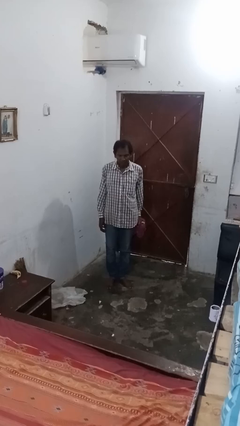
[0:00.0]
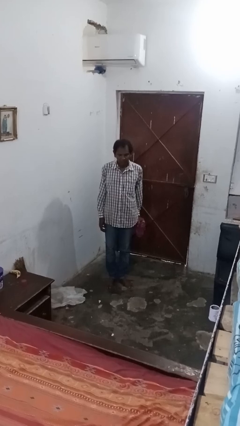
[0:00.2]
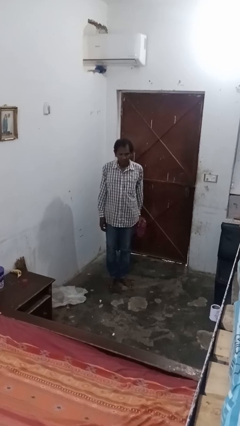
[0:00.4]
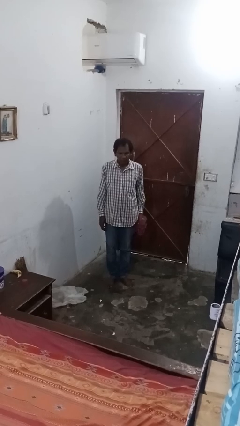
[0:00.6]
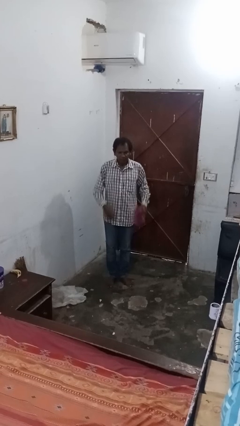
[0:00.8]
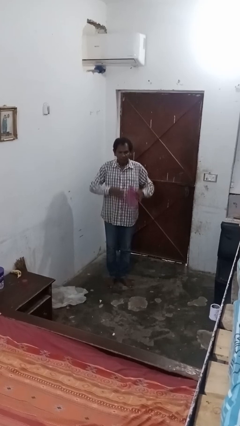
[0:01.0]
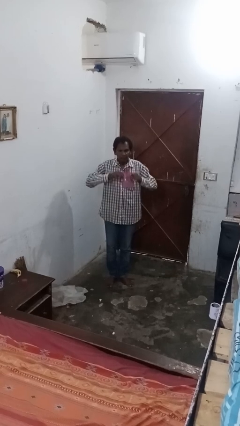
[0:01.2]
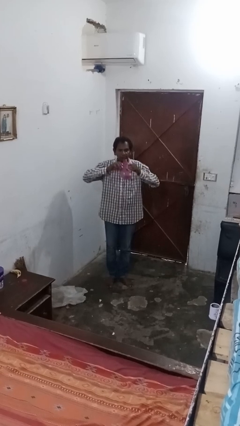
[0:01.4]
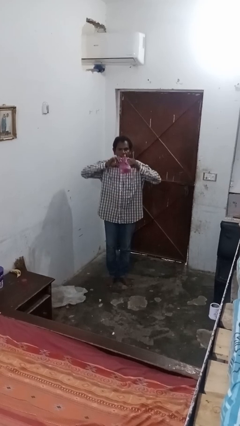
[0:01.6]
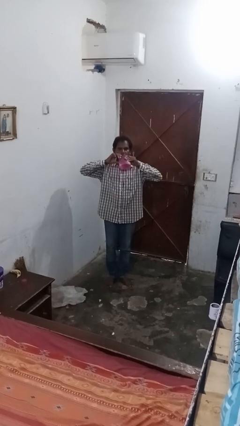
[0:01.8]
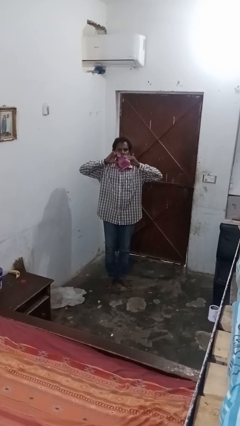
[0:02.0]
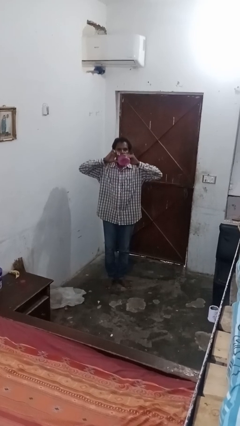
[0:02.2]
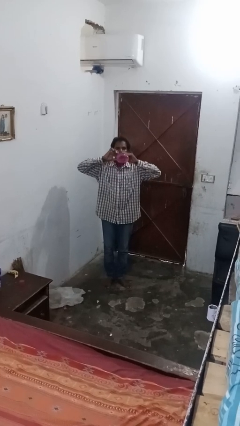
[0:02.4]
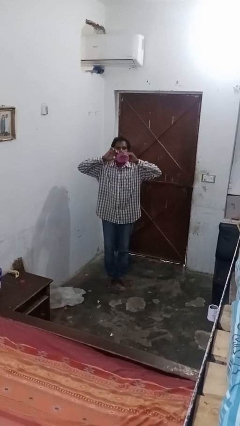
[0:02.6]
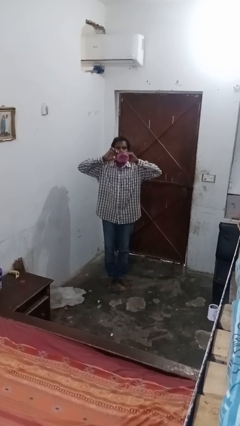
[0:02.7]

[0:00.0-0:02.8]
person drinks from bottle

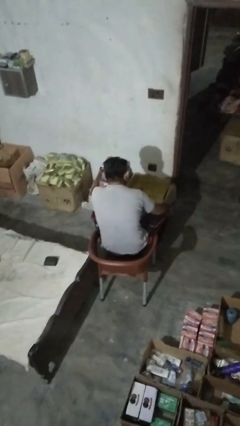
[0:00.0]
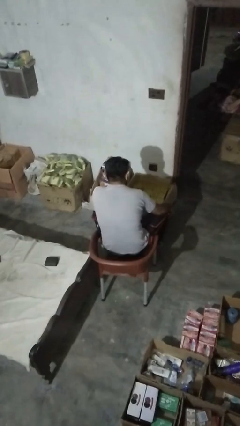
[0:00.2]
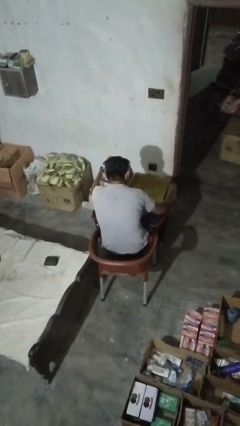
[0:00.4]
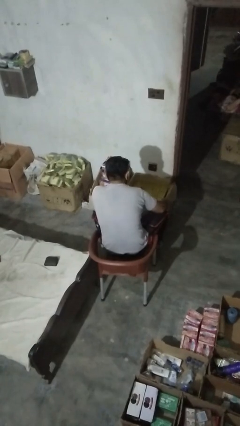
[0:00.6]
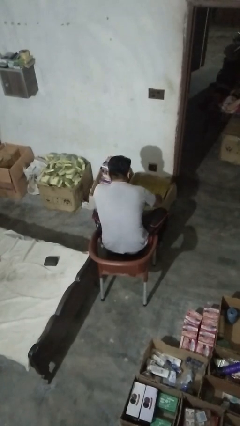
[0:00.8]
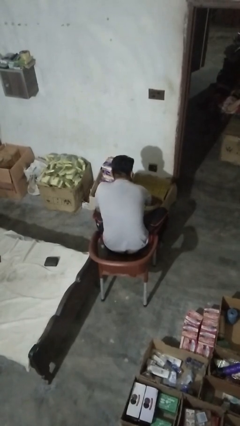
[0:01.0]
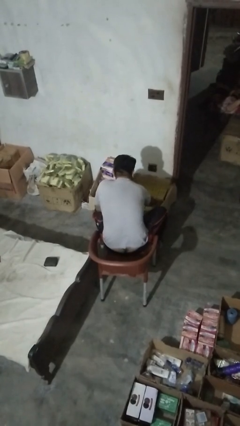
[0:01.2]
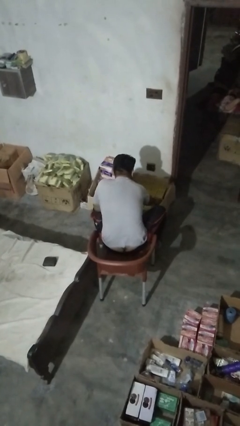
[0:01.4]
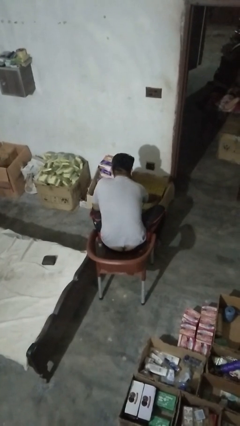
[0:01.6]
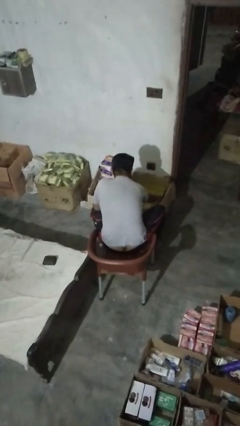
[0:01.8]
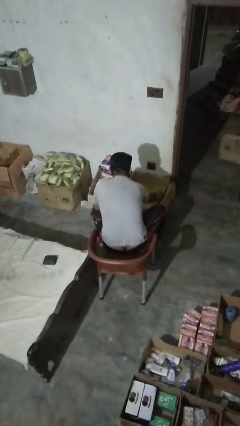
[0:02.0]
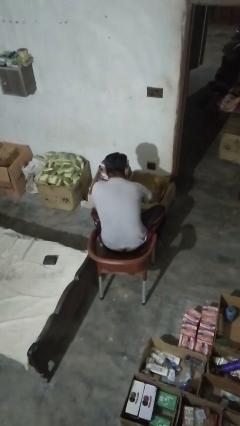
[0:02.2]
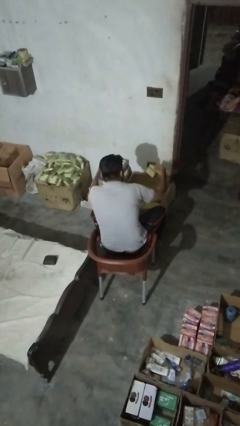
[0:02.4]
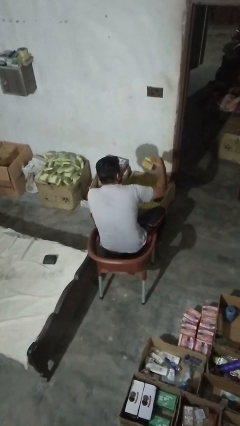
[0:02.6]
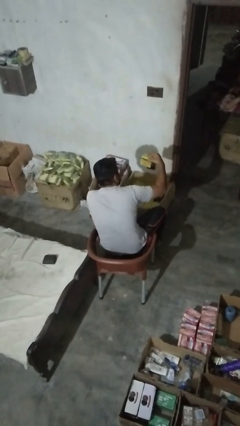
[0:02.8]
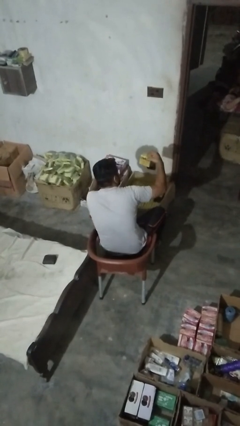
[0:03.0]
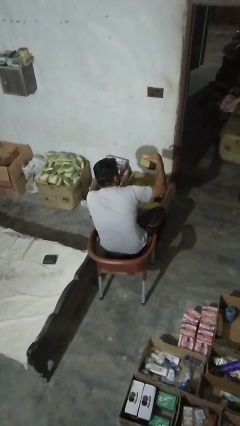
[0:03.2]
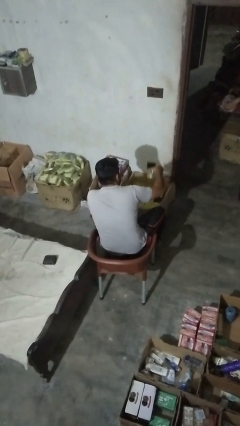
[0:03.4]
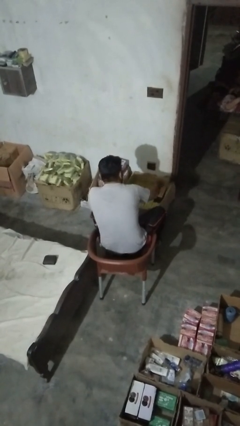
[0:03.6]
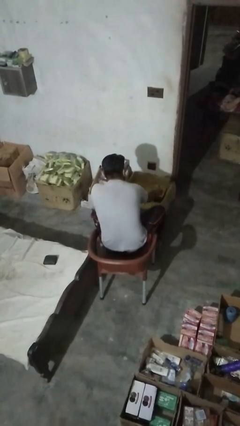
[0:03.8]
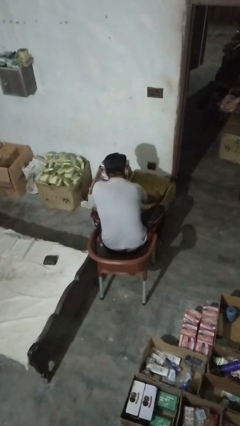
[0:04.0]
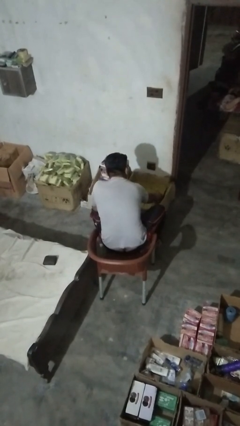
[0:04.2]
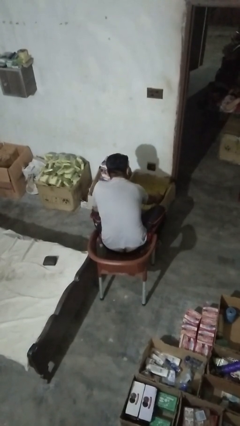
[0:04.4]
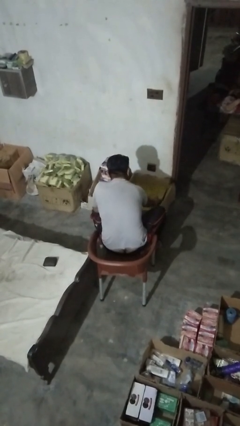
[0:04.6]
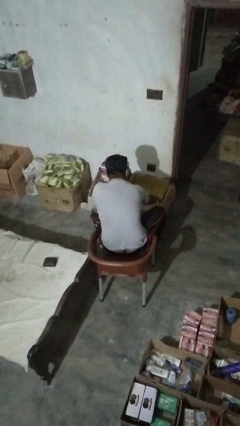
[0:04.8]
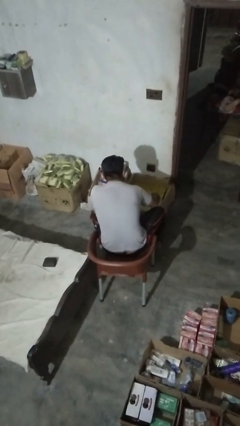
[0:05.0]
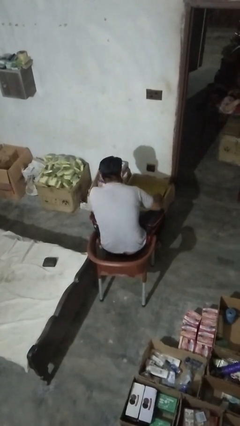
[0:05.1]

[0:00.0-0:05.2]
person searches in box

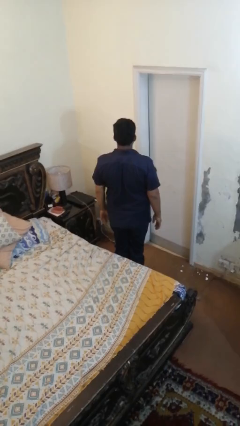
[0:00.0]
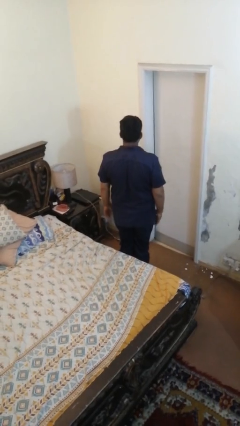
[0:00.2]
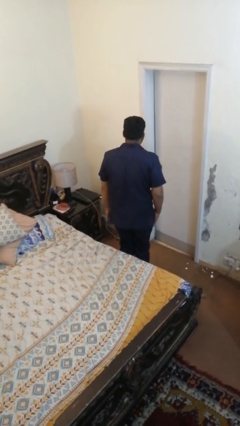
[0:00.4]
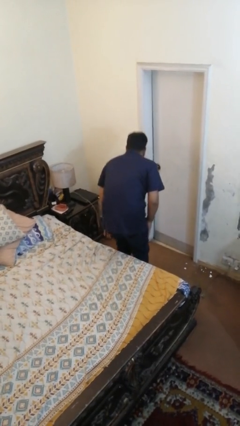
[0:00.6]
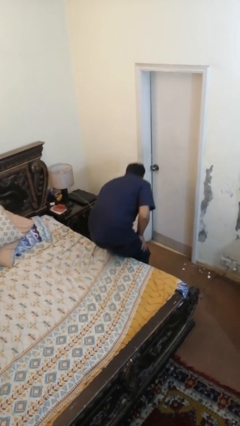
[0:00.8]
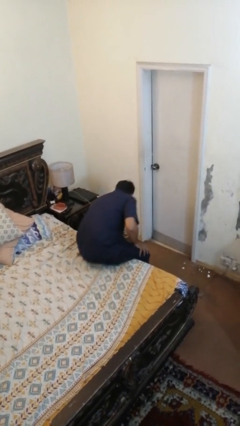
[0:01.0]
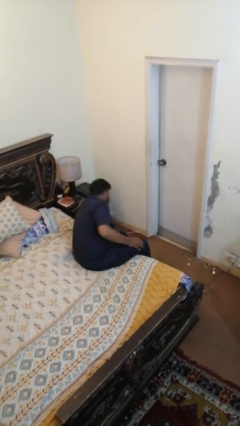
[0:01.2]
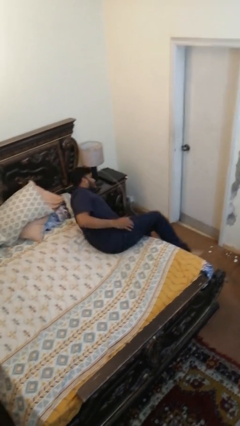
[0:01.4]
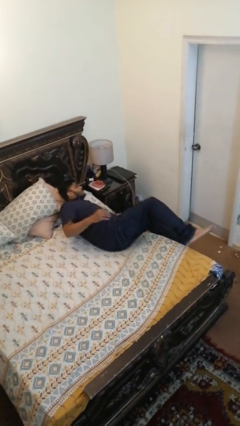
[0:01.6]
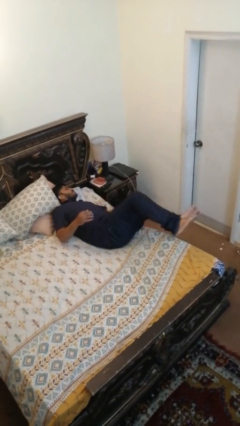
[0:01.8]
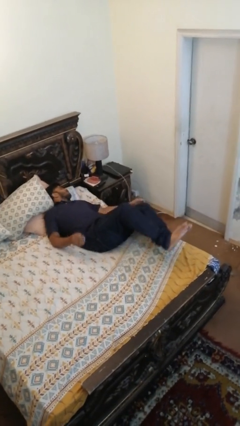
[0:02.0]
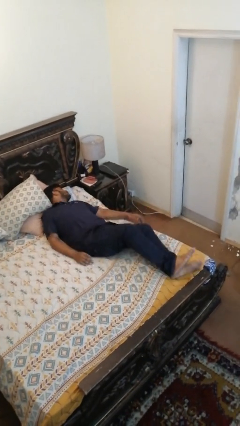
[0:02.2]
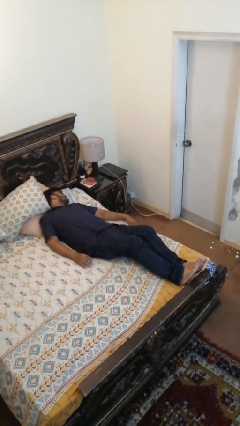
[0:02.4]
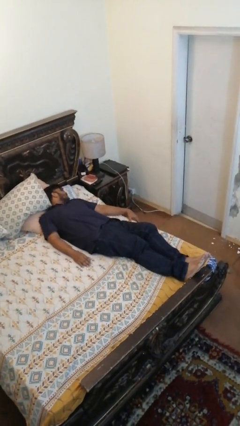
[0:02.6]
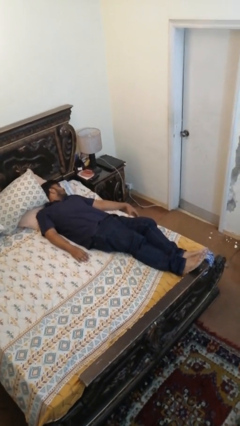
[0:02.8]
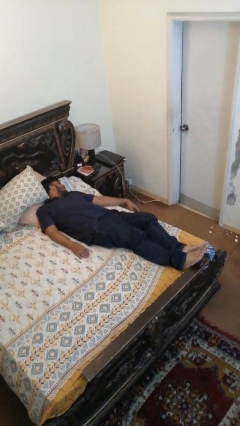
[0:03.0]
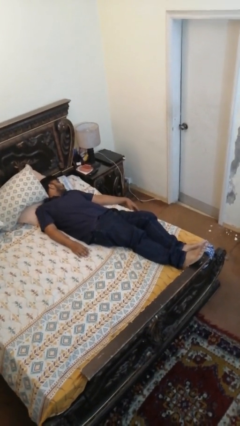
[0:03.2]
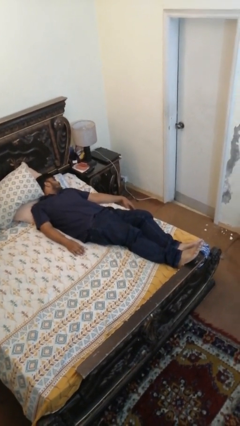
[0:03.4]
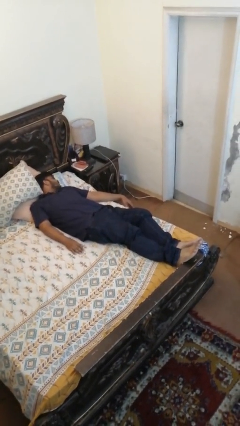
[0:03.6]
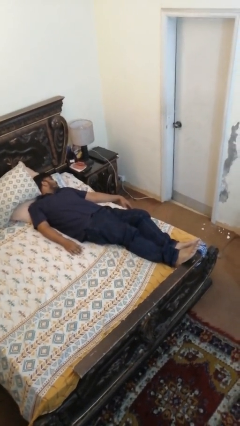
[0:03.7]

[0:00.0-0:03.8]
person lies down on bed

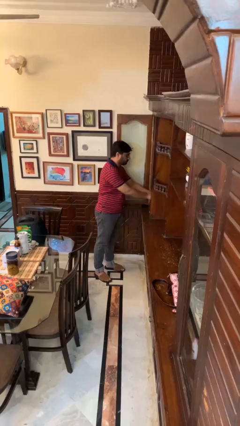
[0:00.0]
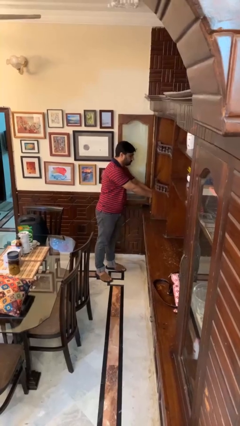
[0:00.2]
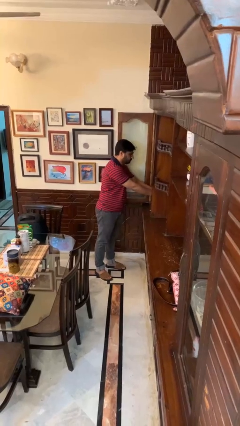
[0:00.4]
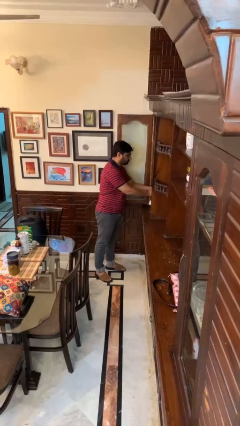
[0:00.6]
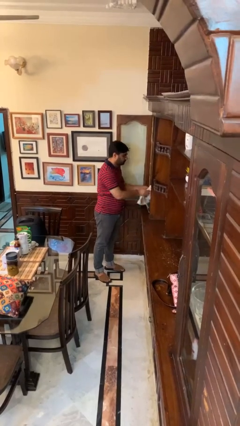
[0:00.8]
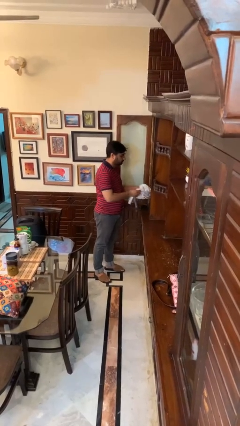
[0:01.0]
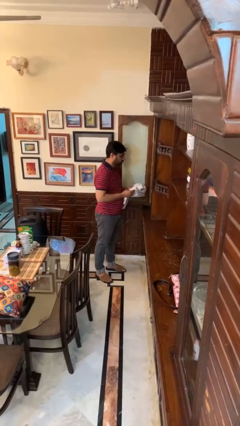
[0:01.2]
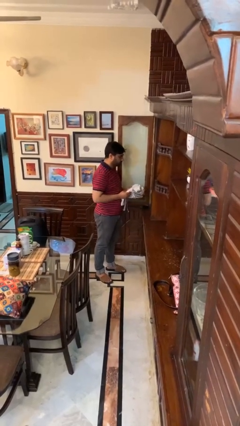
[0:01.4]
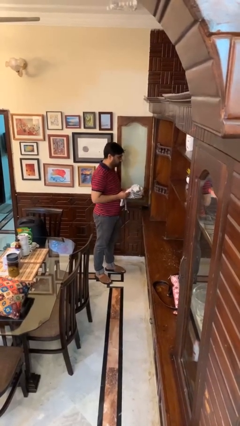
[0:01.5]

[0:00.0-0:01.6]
person takes clothes from dresser

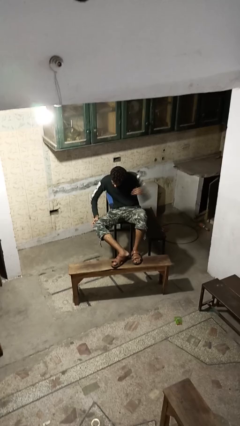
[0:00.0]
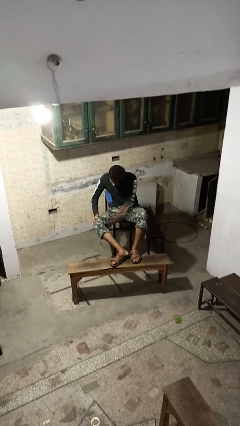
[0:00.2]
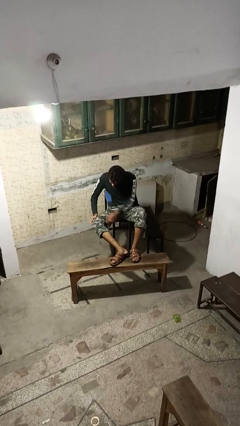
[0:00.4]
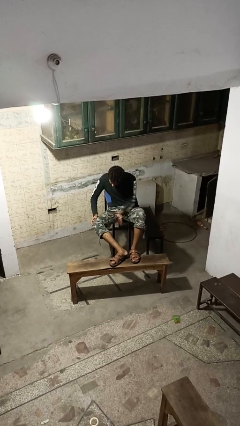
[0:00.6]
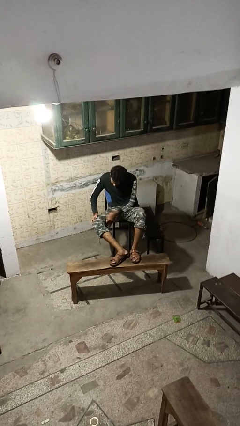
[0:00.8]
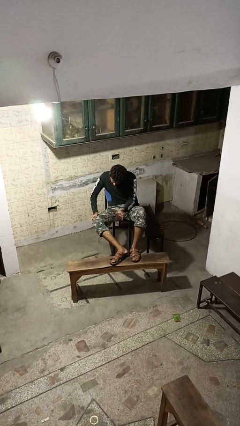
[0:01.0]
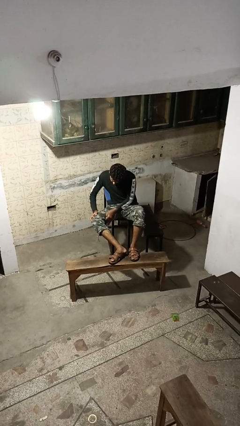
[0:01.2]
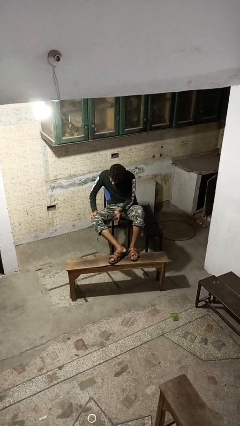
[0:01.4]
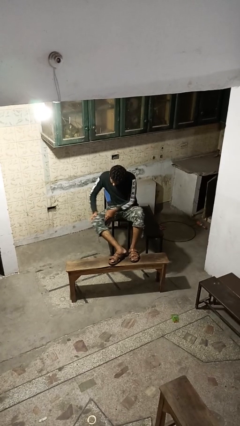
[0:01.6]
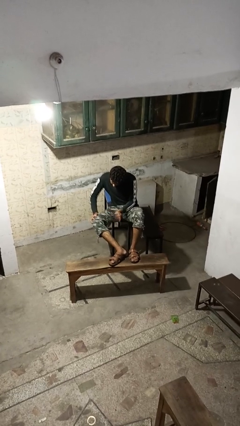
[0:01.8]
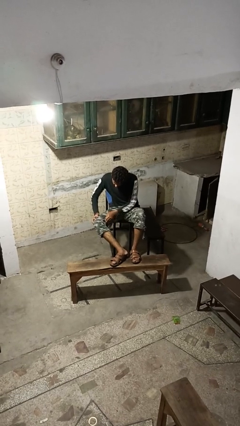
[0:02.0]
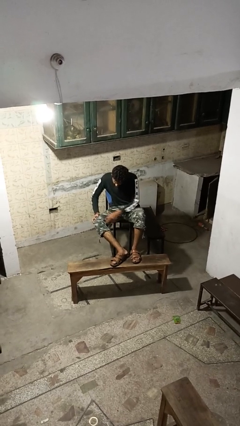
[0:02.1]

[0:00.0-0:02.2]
person slaps hands on thighs

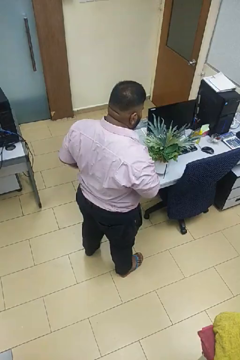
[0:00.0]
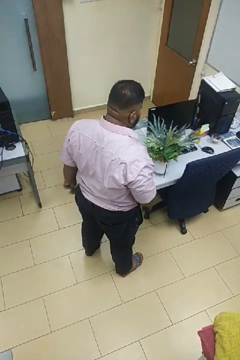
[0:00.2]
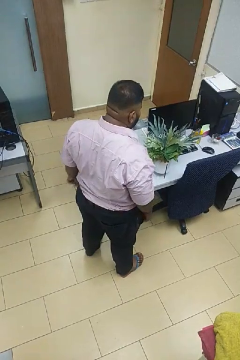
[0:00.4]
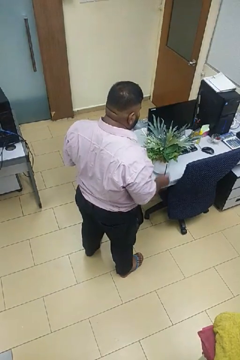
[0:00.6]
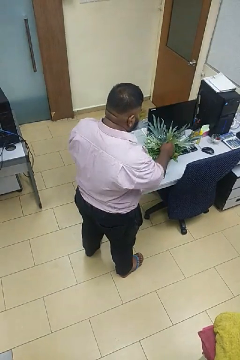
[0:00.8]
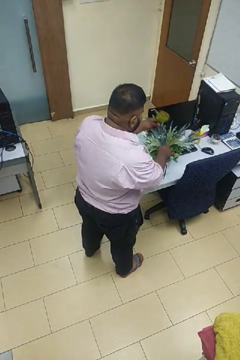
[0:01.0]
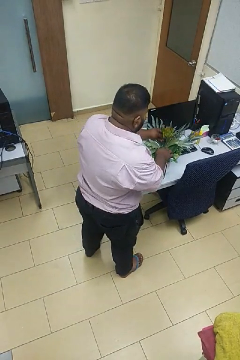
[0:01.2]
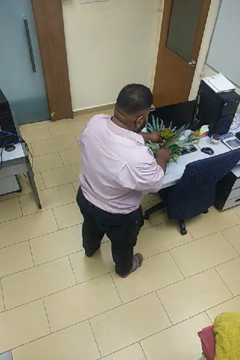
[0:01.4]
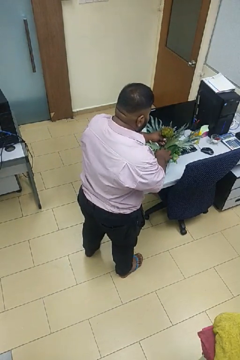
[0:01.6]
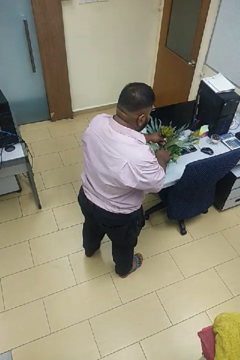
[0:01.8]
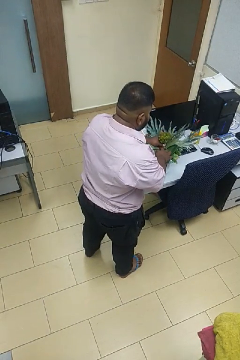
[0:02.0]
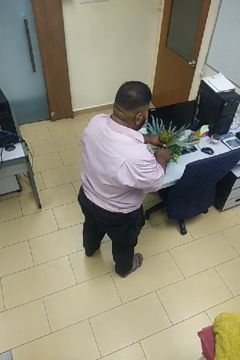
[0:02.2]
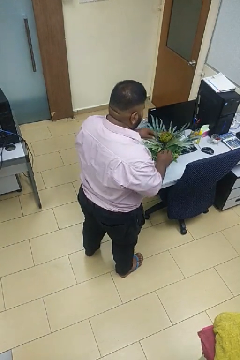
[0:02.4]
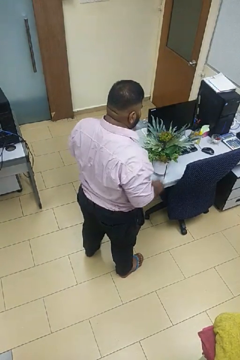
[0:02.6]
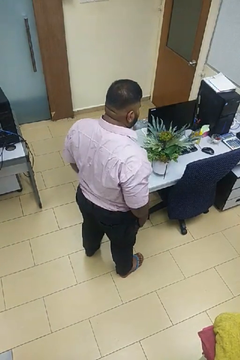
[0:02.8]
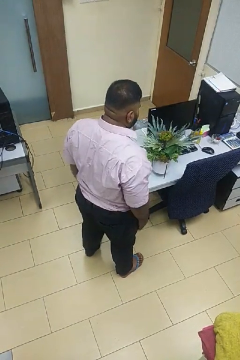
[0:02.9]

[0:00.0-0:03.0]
person arranges flowers in vase
